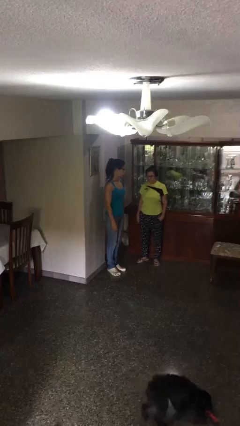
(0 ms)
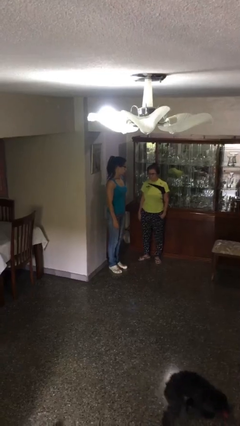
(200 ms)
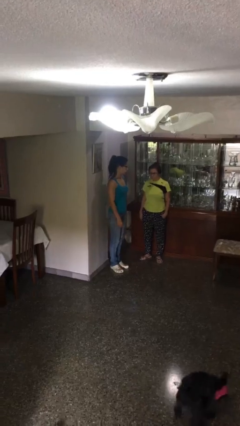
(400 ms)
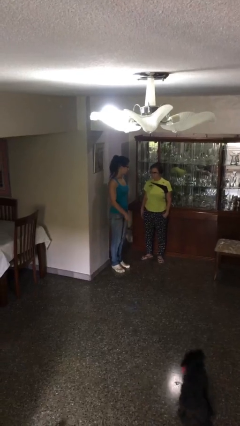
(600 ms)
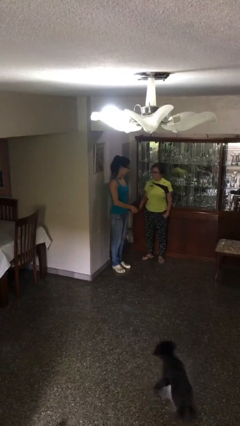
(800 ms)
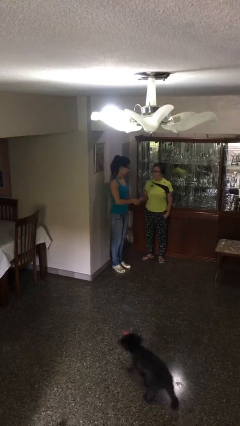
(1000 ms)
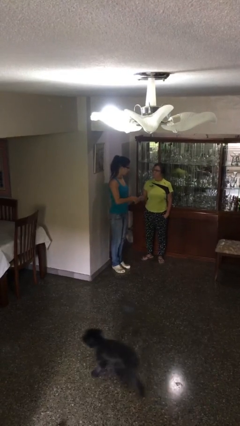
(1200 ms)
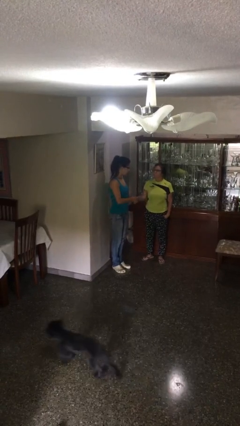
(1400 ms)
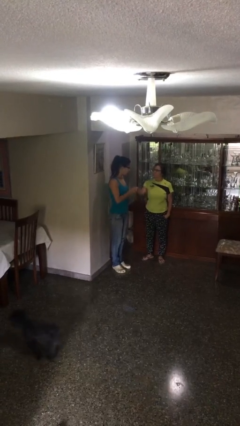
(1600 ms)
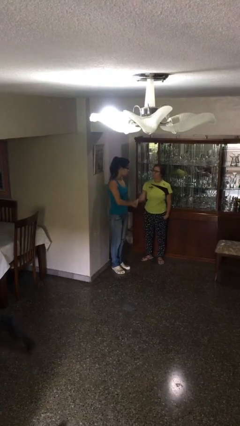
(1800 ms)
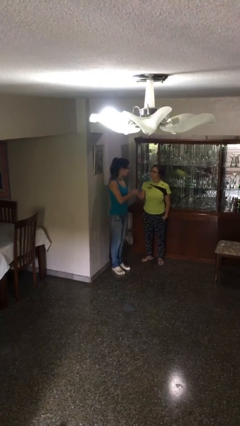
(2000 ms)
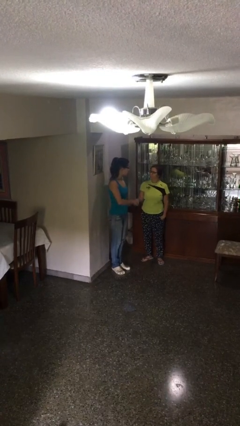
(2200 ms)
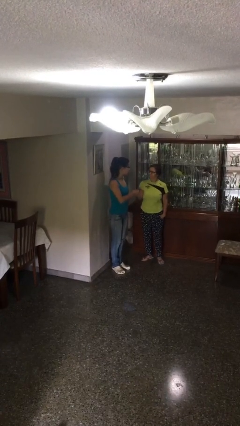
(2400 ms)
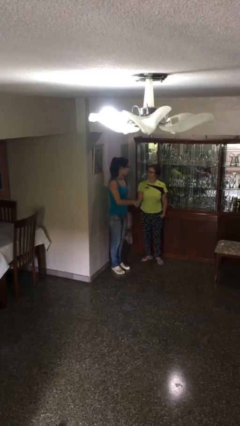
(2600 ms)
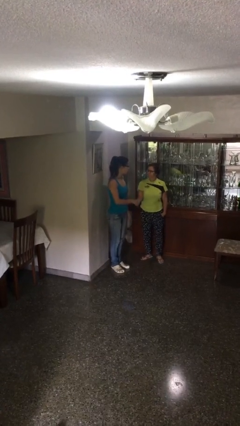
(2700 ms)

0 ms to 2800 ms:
person shakes hand

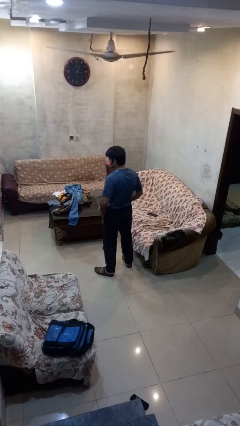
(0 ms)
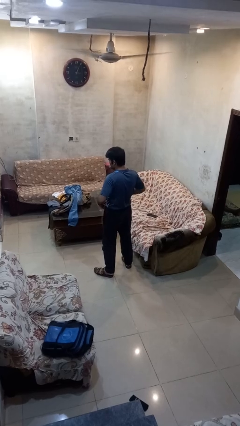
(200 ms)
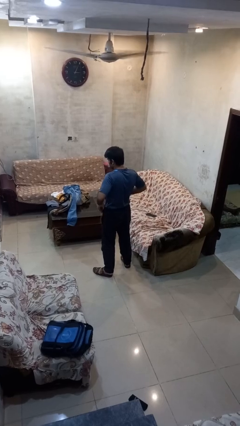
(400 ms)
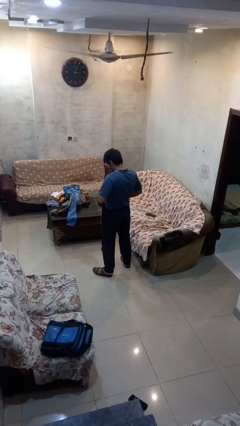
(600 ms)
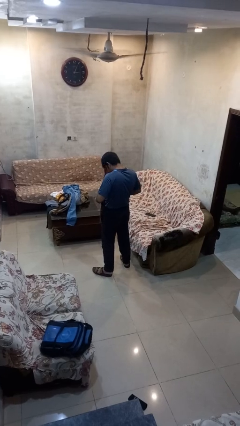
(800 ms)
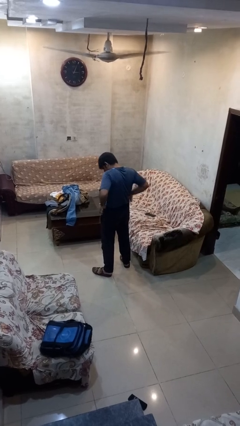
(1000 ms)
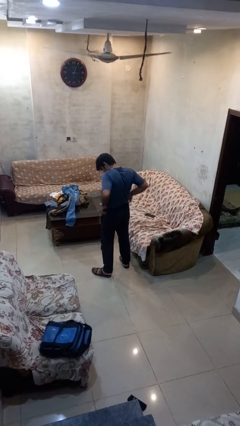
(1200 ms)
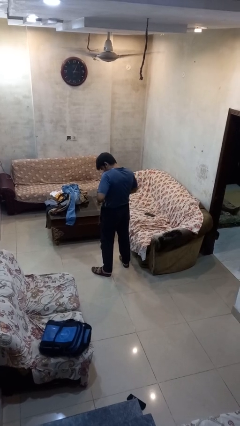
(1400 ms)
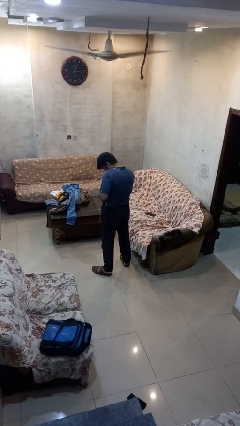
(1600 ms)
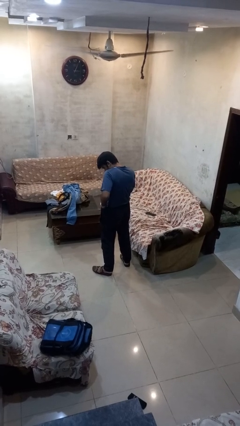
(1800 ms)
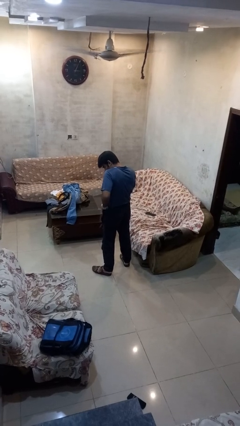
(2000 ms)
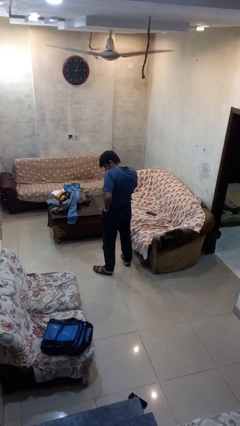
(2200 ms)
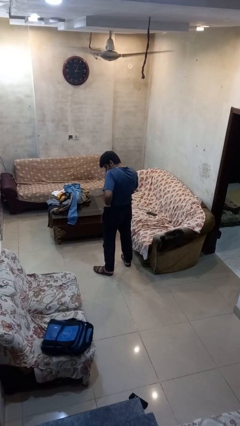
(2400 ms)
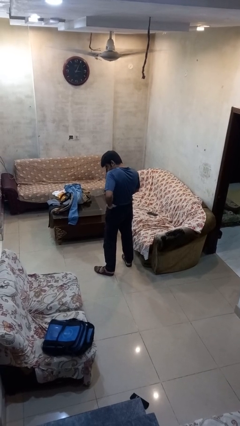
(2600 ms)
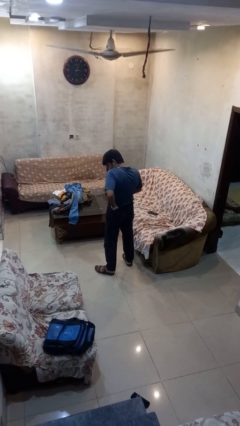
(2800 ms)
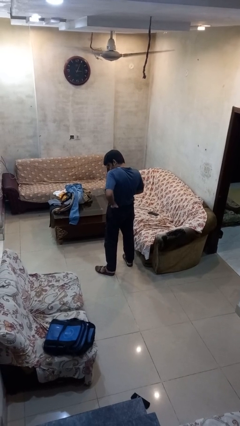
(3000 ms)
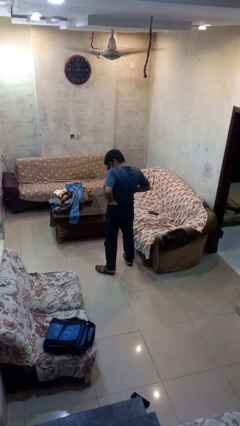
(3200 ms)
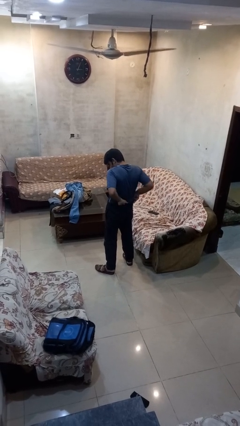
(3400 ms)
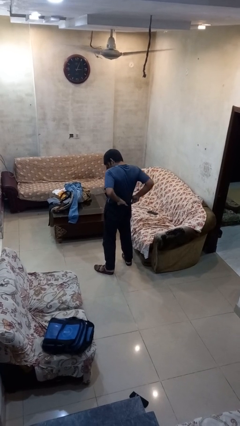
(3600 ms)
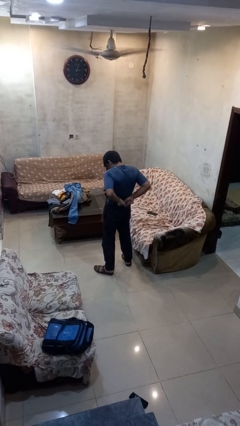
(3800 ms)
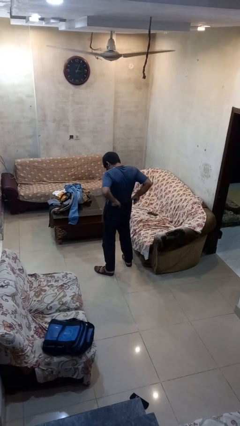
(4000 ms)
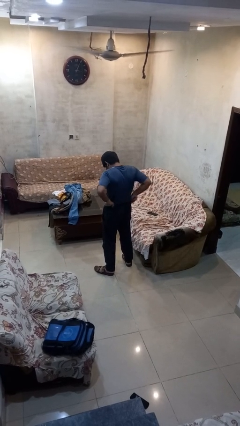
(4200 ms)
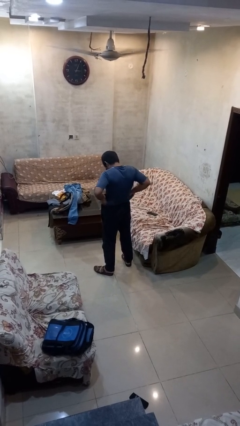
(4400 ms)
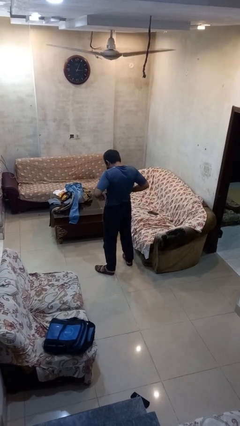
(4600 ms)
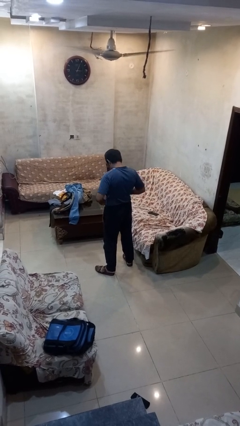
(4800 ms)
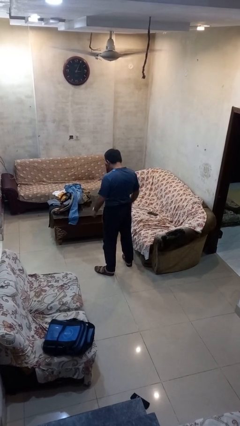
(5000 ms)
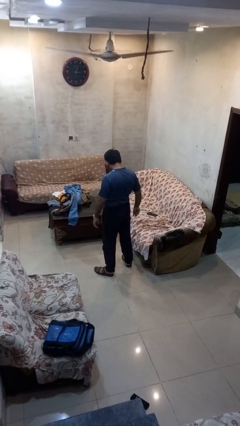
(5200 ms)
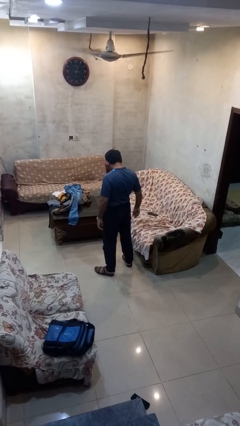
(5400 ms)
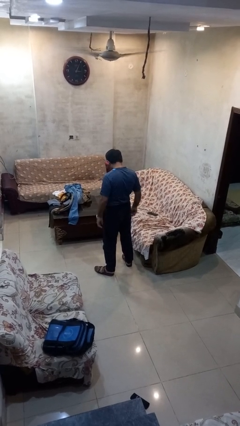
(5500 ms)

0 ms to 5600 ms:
person hikes up pants

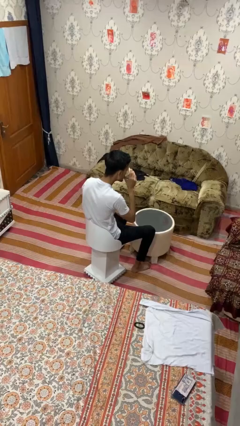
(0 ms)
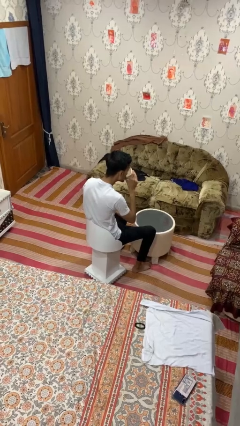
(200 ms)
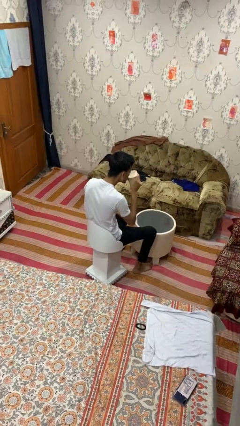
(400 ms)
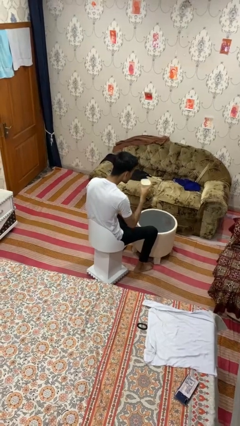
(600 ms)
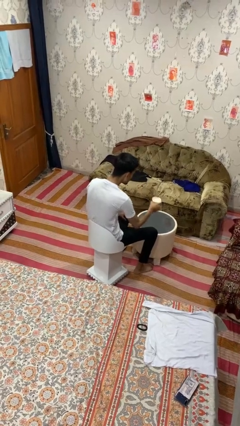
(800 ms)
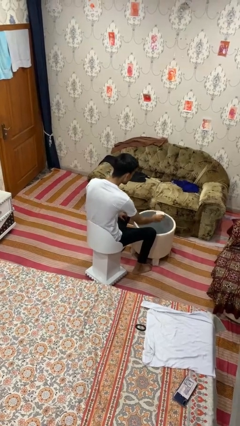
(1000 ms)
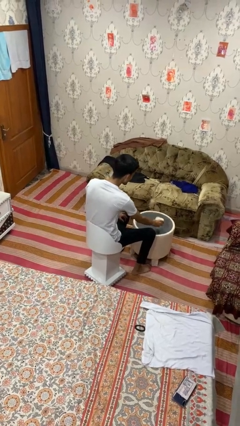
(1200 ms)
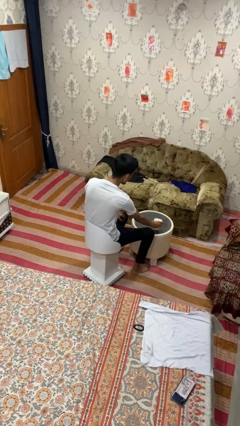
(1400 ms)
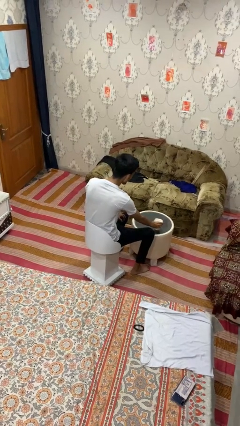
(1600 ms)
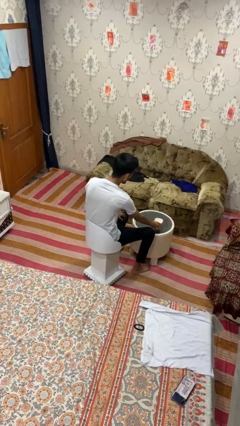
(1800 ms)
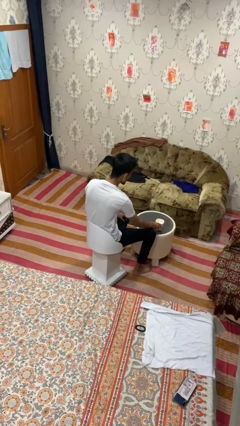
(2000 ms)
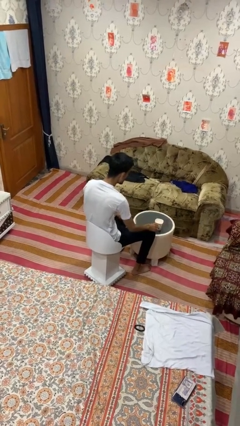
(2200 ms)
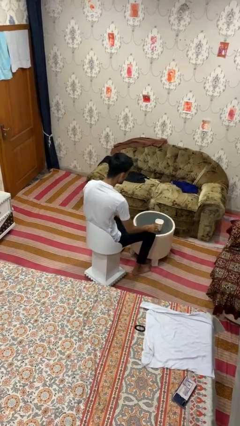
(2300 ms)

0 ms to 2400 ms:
person puts down object on table

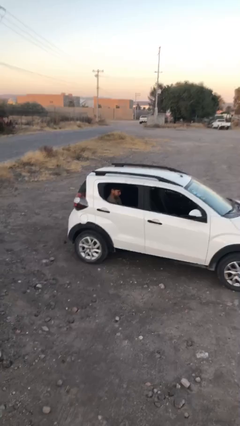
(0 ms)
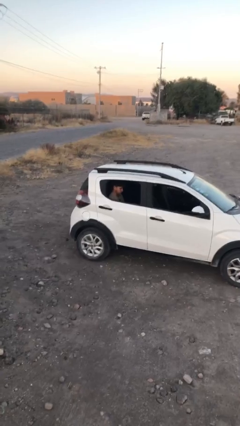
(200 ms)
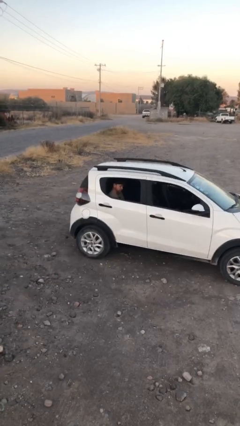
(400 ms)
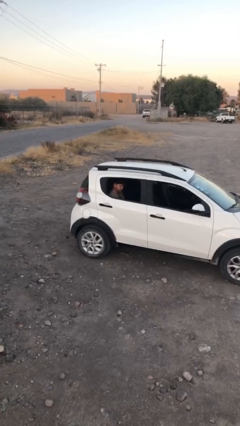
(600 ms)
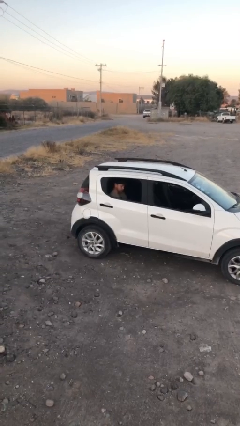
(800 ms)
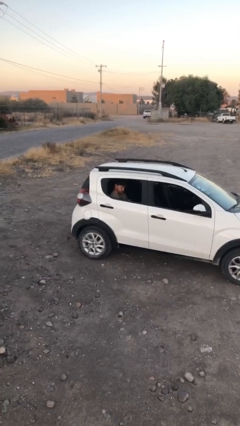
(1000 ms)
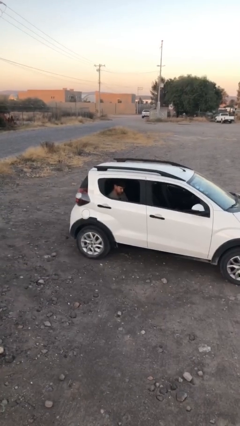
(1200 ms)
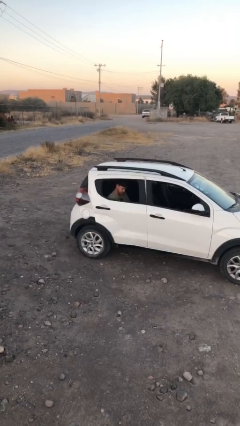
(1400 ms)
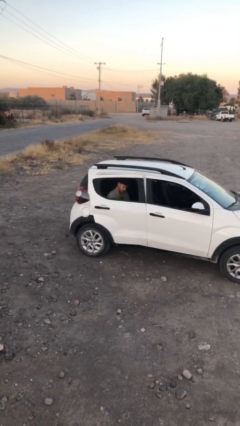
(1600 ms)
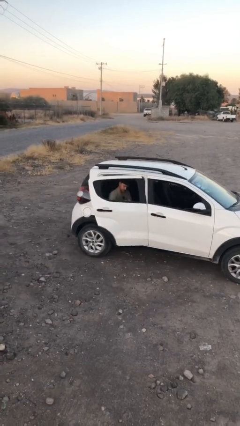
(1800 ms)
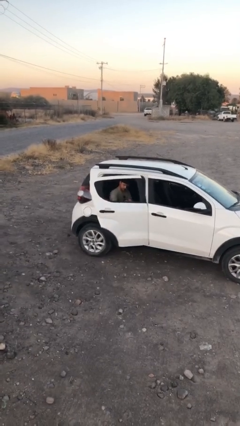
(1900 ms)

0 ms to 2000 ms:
person opens car door

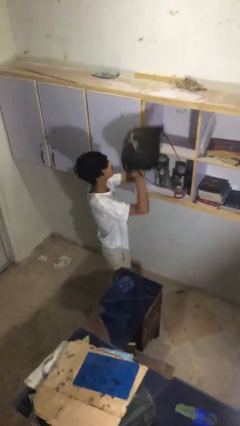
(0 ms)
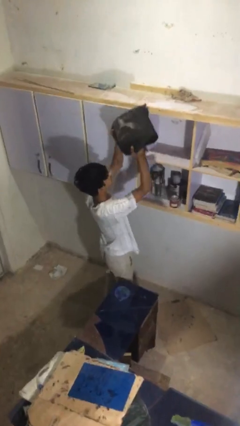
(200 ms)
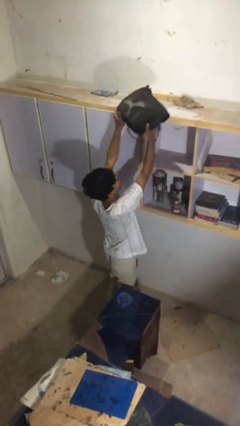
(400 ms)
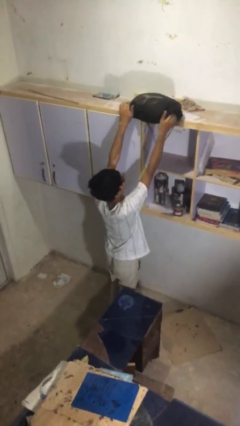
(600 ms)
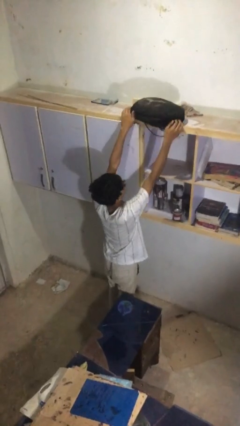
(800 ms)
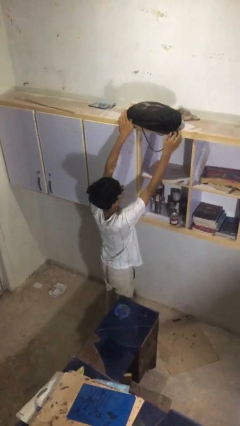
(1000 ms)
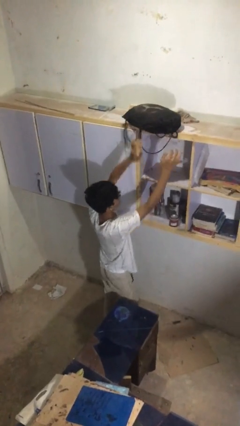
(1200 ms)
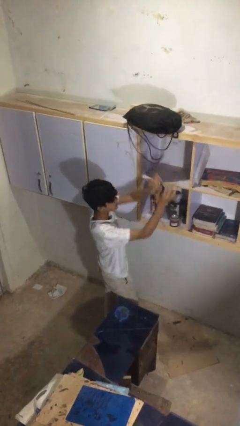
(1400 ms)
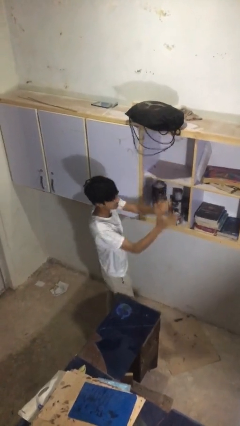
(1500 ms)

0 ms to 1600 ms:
person puts down object on shelf

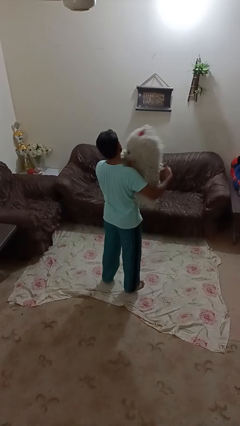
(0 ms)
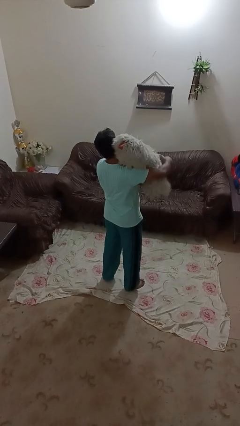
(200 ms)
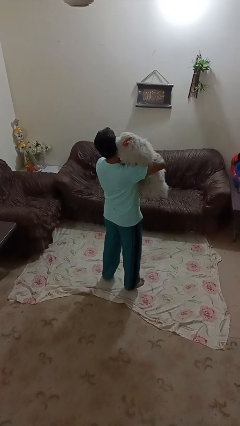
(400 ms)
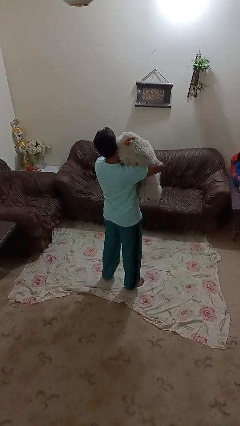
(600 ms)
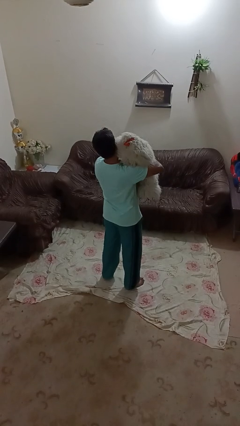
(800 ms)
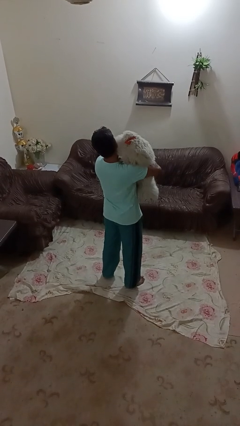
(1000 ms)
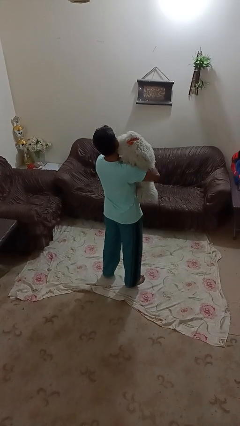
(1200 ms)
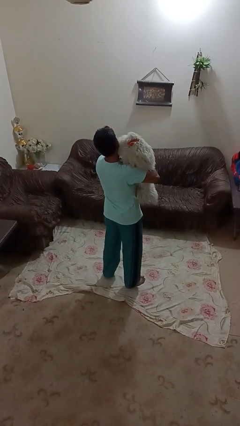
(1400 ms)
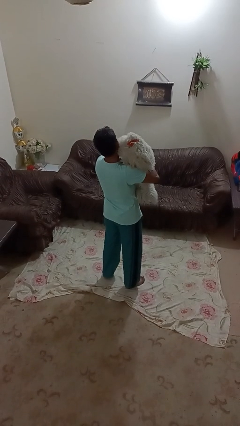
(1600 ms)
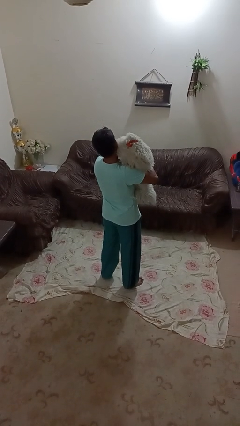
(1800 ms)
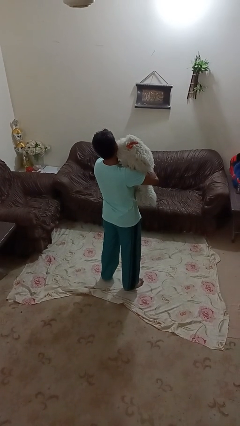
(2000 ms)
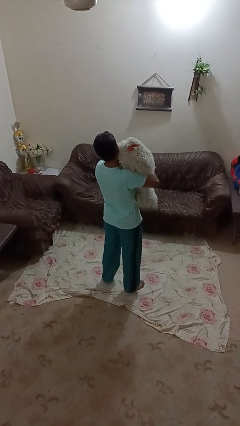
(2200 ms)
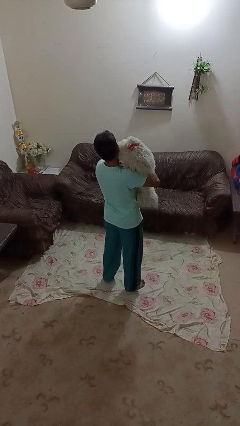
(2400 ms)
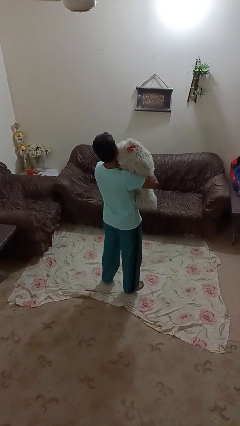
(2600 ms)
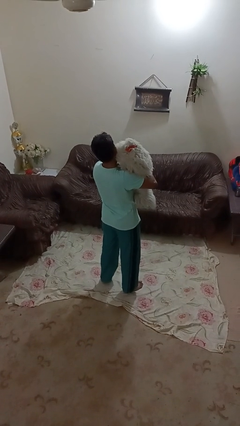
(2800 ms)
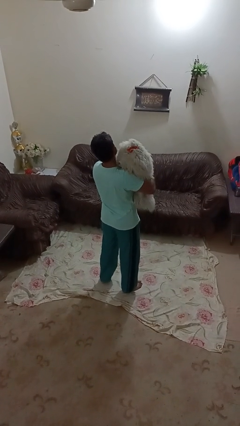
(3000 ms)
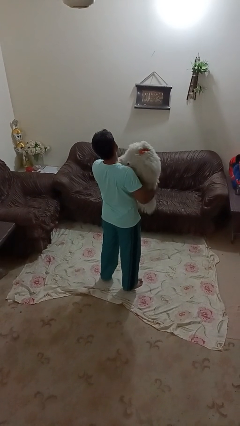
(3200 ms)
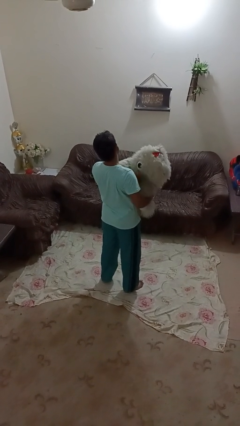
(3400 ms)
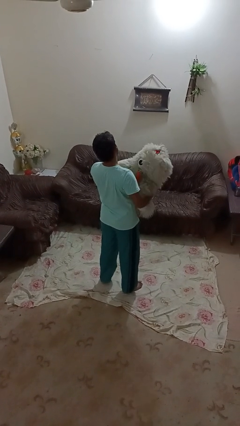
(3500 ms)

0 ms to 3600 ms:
person hugs stuffed animal
